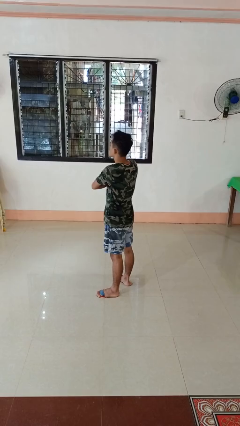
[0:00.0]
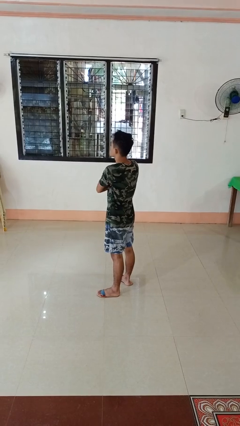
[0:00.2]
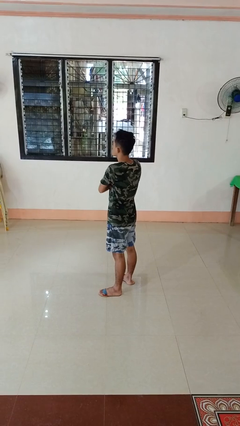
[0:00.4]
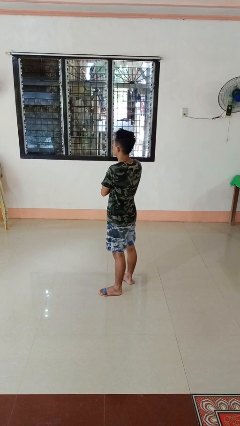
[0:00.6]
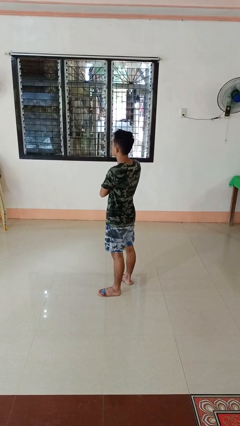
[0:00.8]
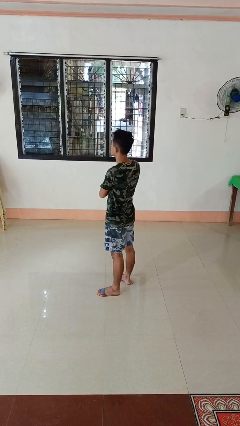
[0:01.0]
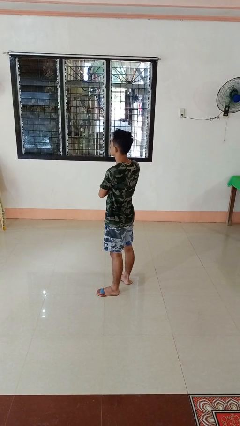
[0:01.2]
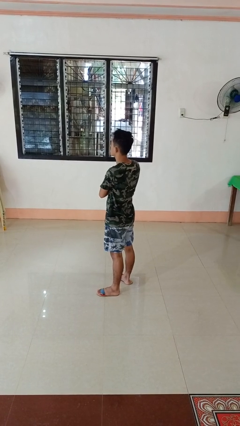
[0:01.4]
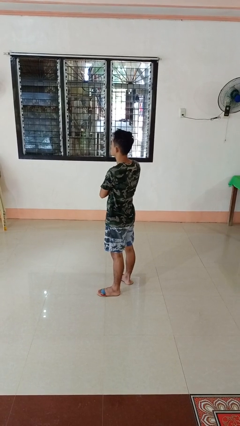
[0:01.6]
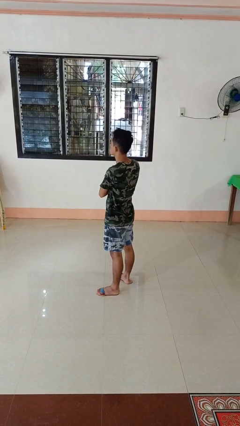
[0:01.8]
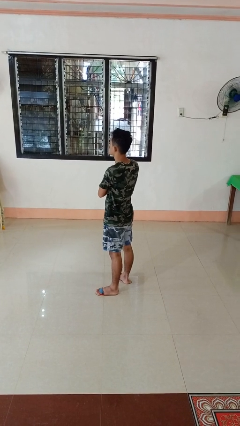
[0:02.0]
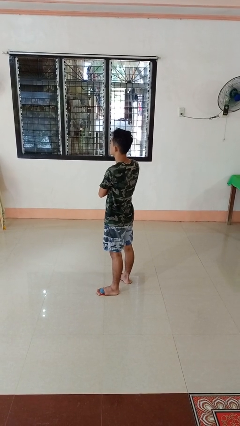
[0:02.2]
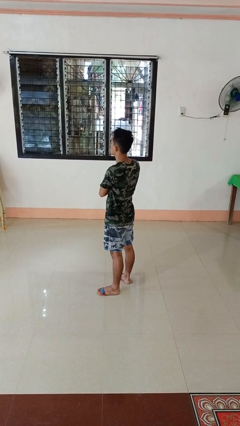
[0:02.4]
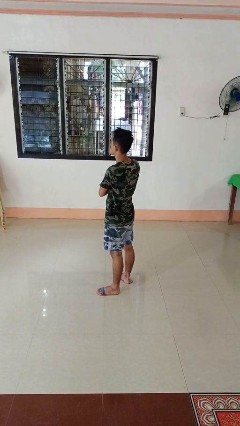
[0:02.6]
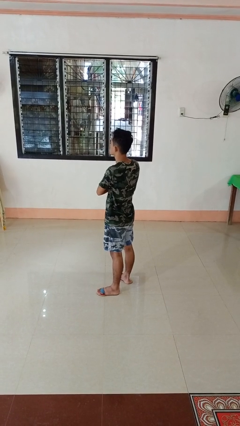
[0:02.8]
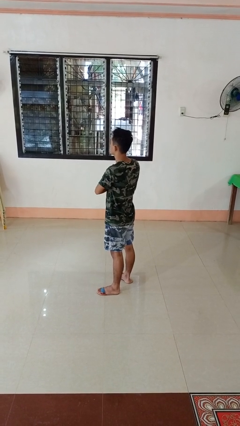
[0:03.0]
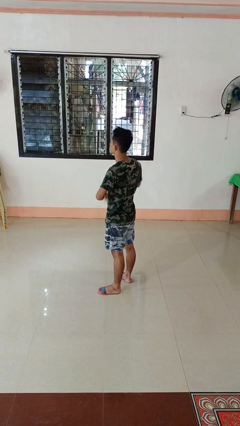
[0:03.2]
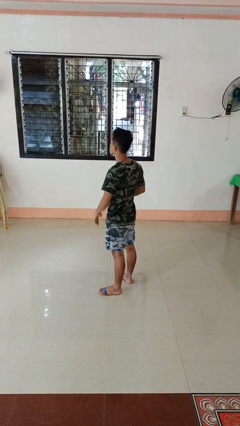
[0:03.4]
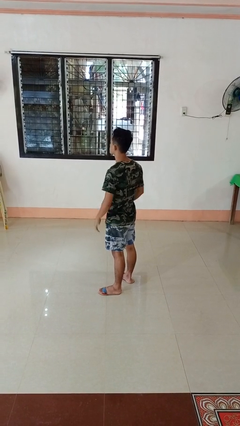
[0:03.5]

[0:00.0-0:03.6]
person crosses arms

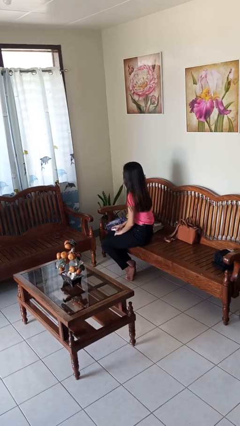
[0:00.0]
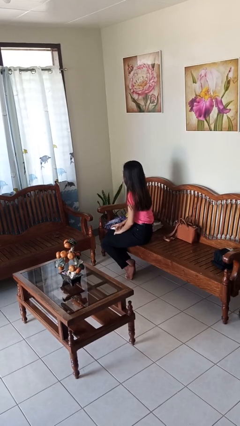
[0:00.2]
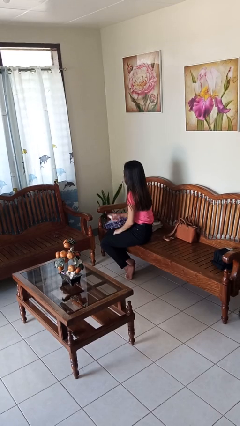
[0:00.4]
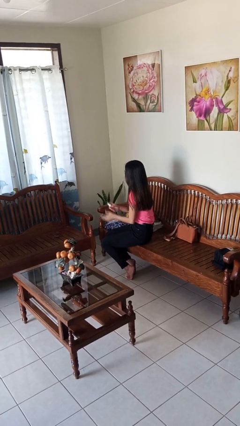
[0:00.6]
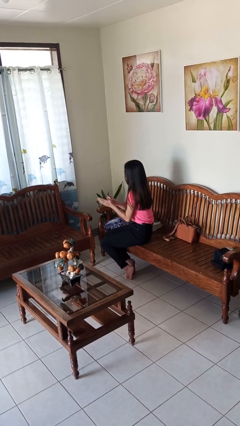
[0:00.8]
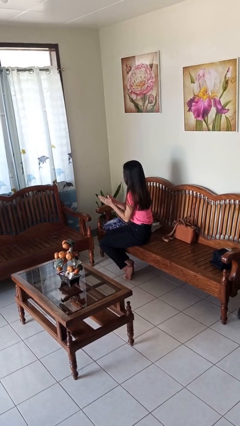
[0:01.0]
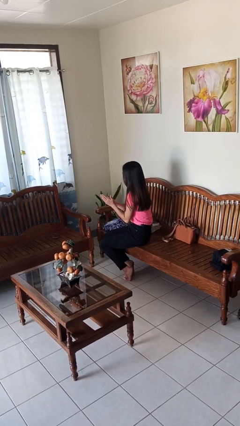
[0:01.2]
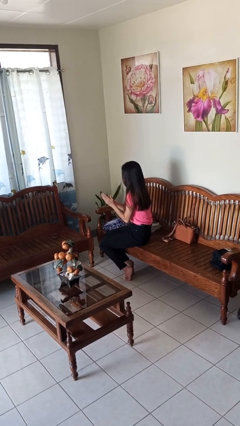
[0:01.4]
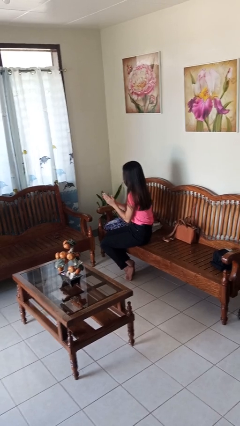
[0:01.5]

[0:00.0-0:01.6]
person sprays from bottle

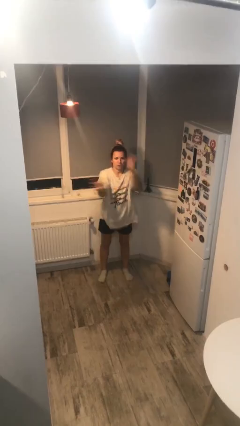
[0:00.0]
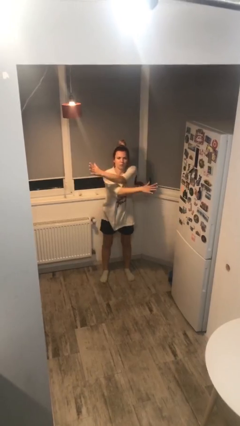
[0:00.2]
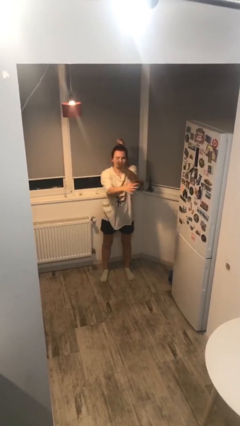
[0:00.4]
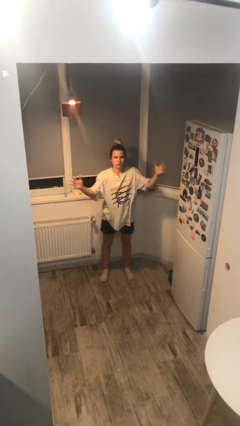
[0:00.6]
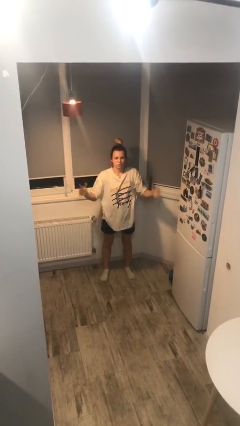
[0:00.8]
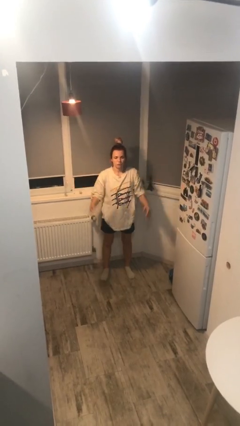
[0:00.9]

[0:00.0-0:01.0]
person punches

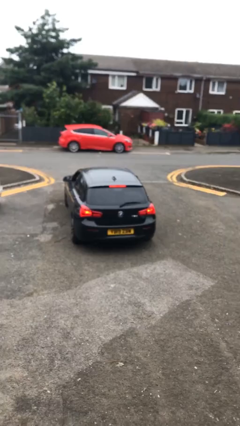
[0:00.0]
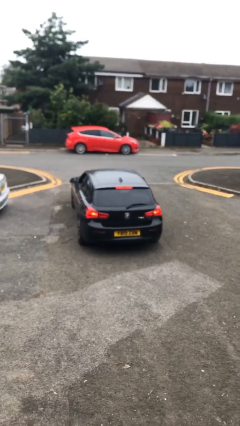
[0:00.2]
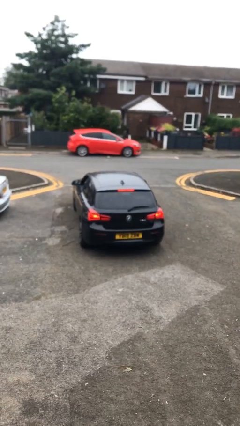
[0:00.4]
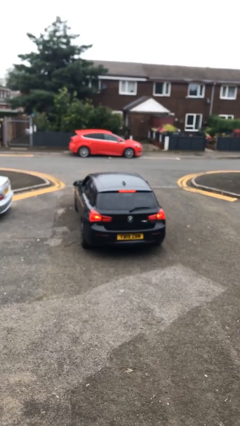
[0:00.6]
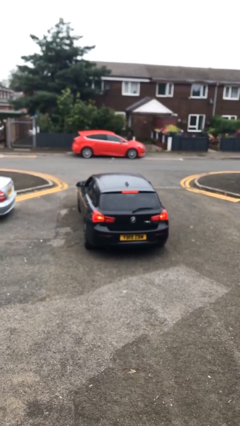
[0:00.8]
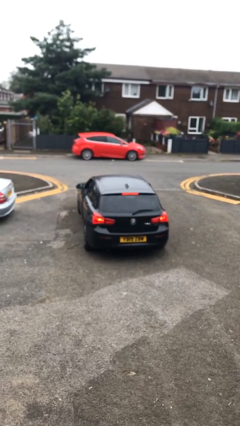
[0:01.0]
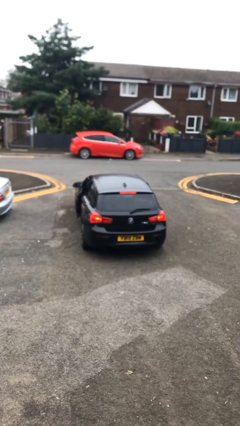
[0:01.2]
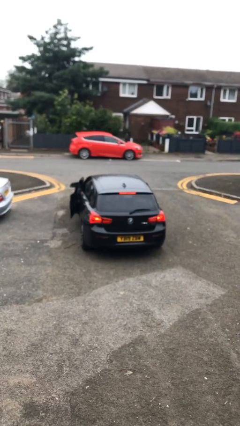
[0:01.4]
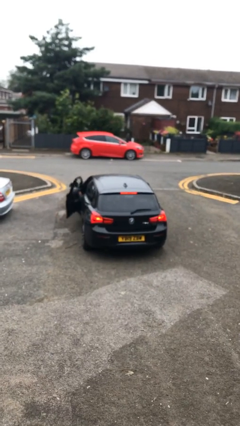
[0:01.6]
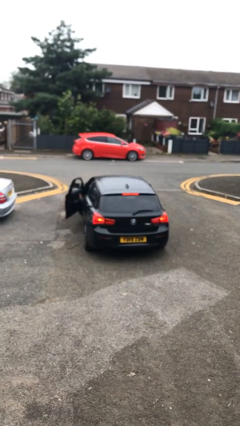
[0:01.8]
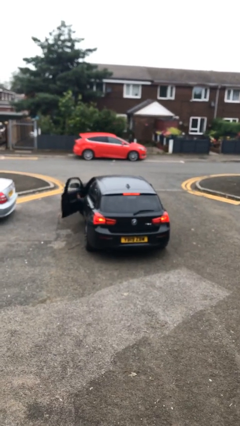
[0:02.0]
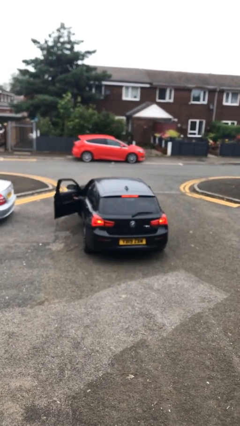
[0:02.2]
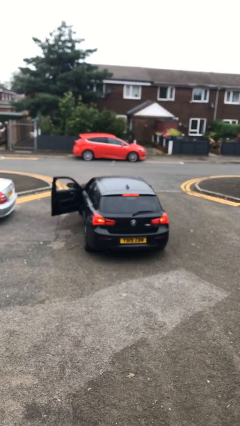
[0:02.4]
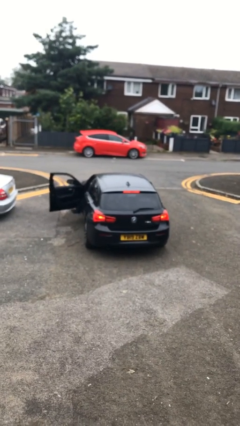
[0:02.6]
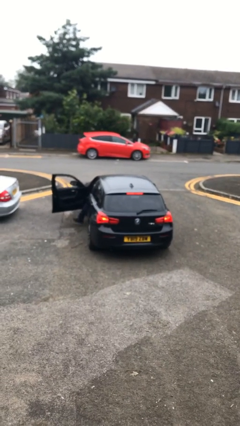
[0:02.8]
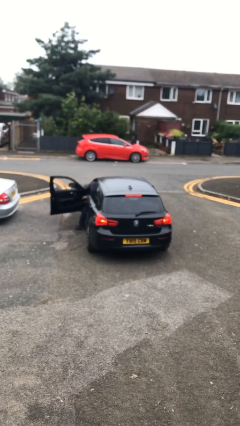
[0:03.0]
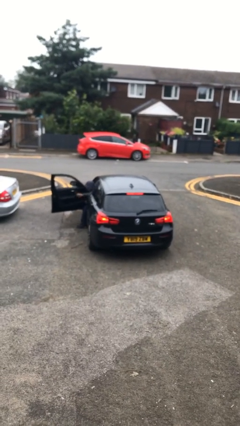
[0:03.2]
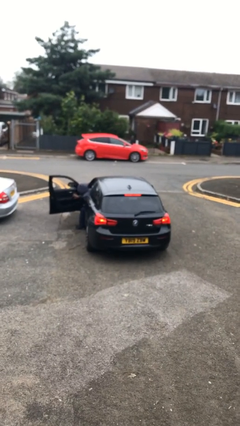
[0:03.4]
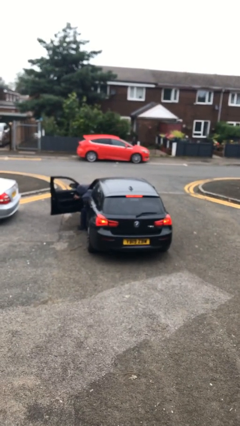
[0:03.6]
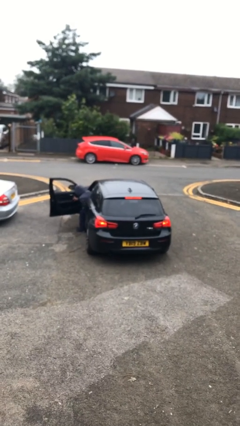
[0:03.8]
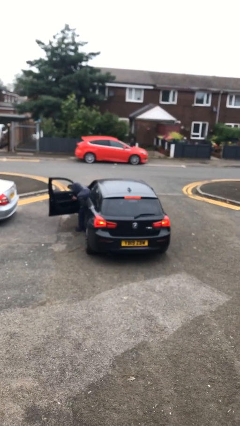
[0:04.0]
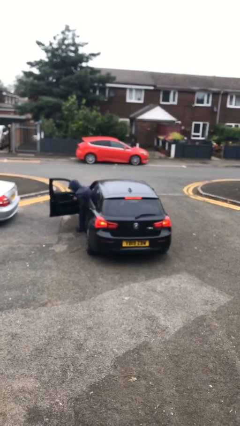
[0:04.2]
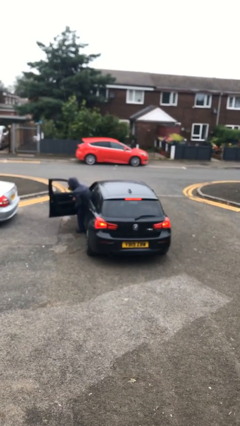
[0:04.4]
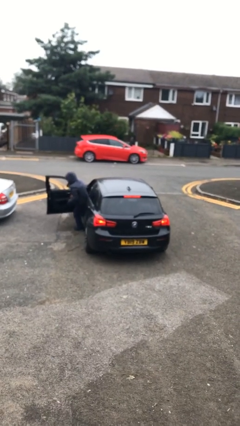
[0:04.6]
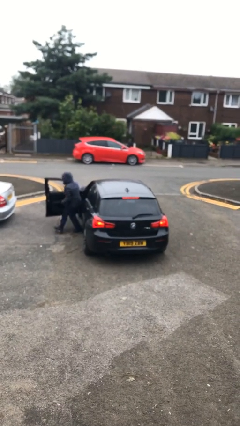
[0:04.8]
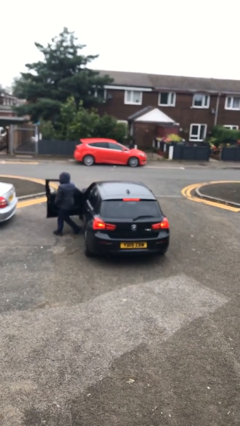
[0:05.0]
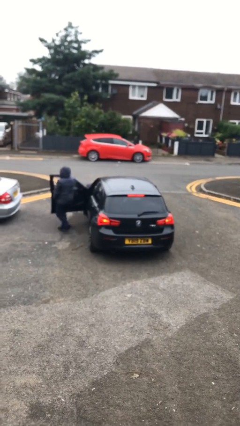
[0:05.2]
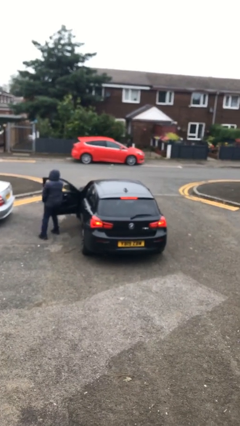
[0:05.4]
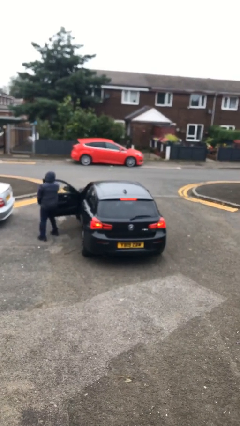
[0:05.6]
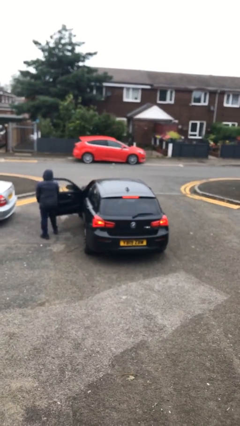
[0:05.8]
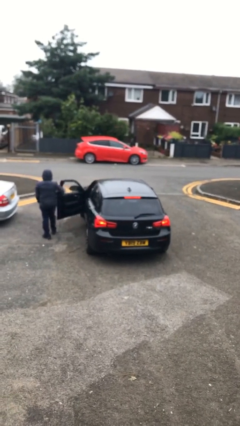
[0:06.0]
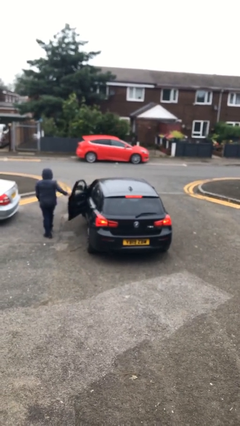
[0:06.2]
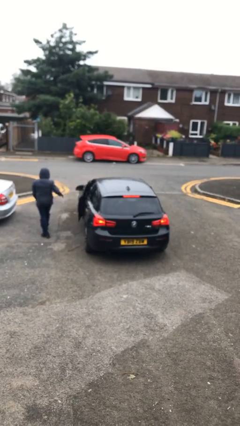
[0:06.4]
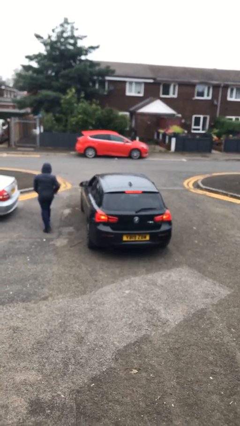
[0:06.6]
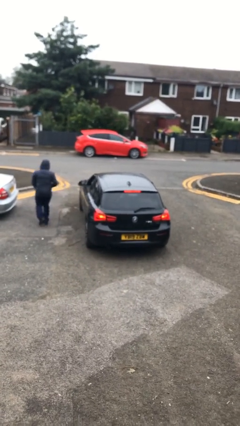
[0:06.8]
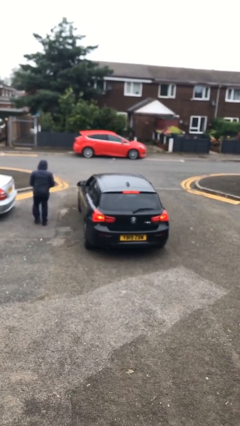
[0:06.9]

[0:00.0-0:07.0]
car drops off person

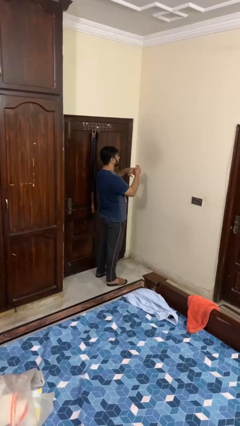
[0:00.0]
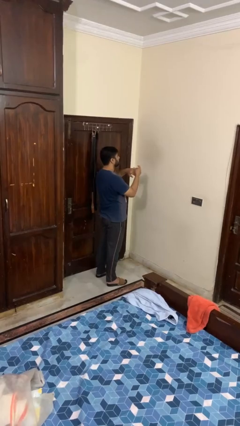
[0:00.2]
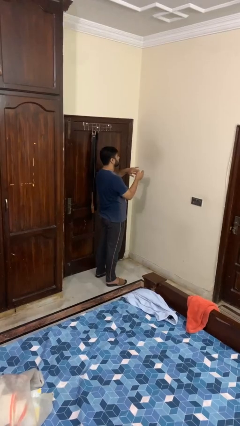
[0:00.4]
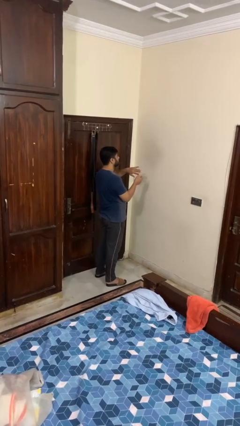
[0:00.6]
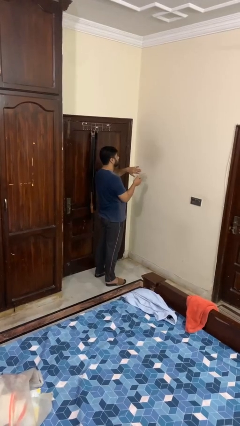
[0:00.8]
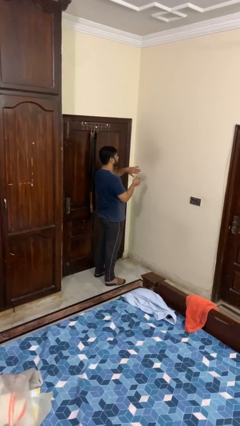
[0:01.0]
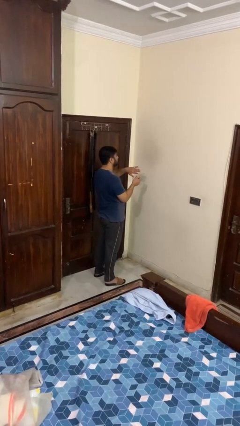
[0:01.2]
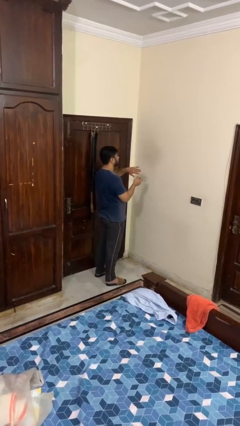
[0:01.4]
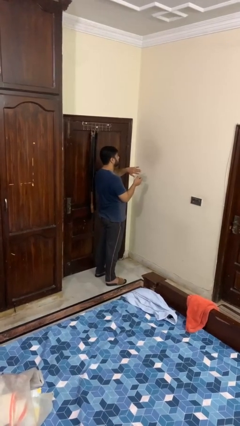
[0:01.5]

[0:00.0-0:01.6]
person puts on ring

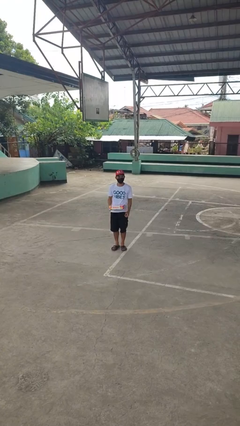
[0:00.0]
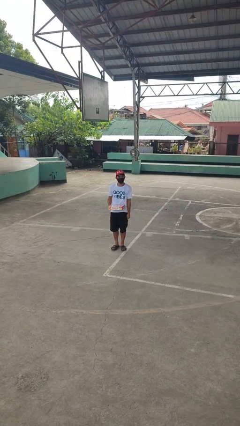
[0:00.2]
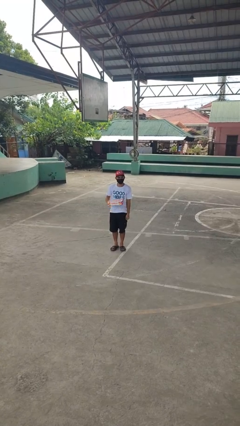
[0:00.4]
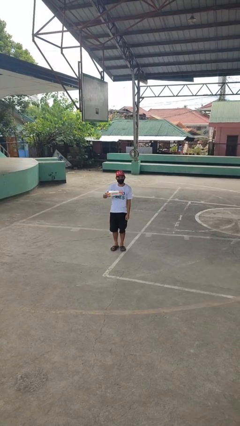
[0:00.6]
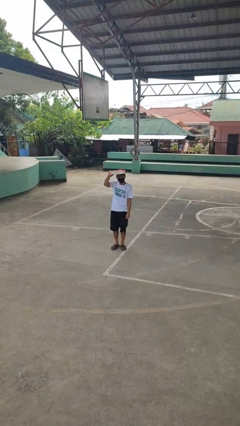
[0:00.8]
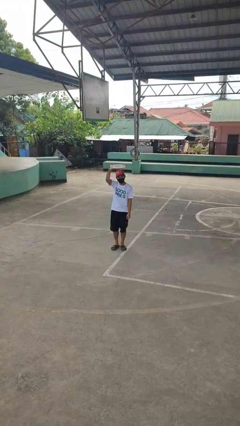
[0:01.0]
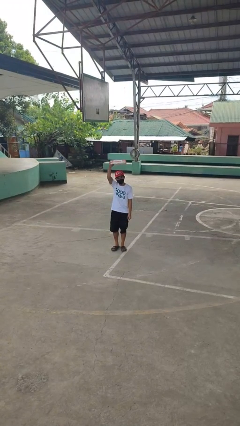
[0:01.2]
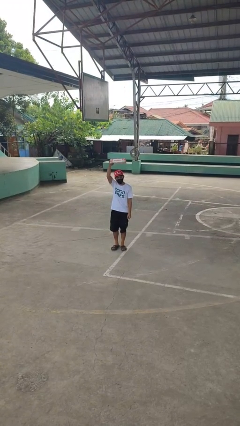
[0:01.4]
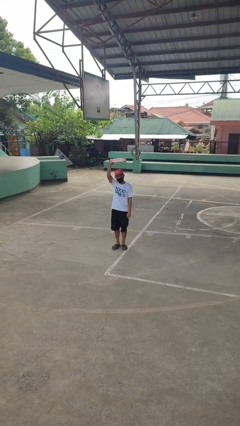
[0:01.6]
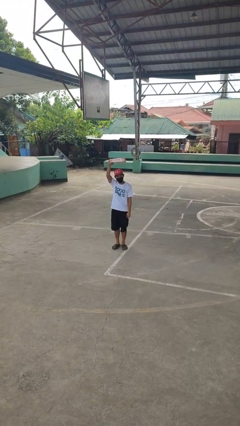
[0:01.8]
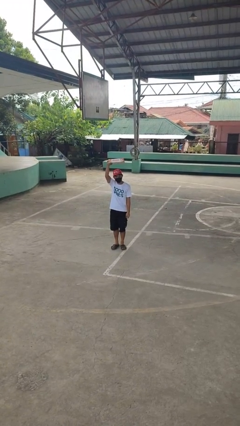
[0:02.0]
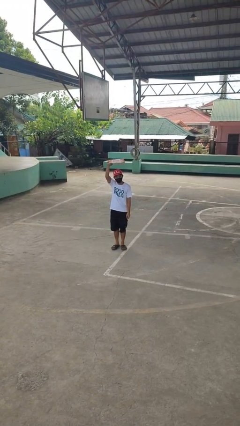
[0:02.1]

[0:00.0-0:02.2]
person holds object above head

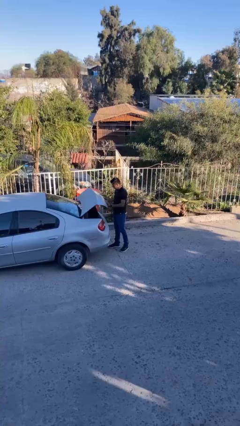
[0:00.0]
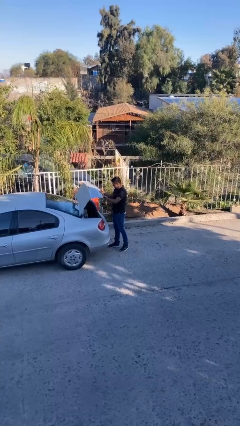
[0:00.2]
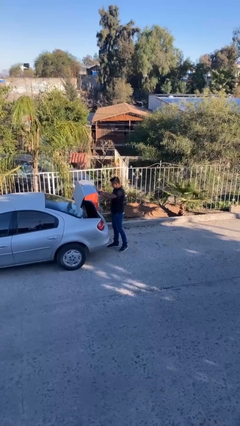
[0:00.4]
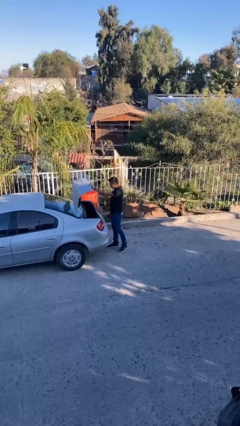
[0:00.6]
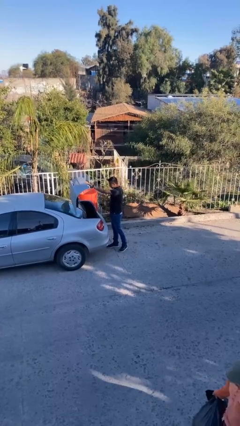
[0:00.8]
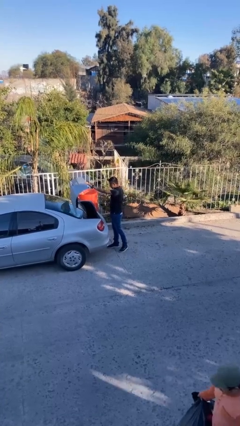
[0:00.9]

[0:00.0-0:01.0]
person opens car trunk
